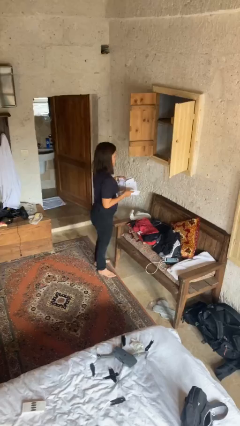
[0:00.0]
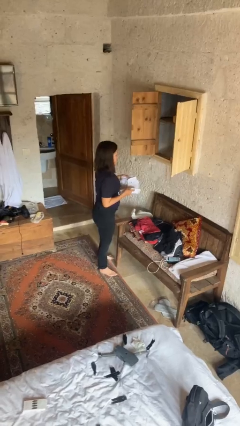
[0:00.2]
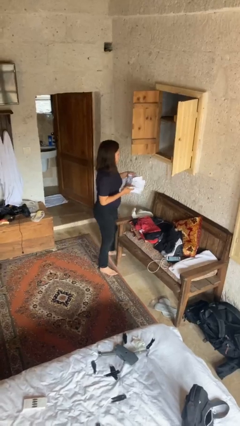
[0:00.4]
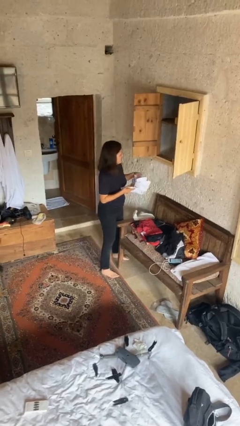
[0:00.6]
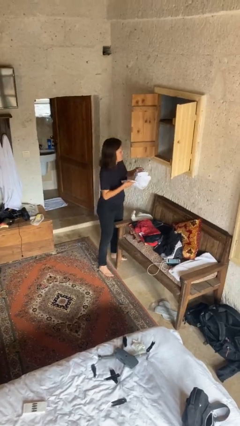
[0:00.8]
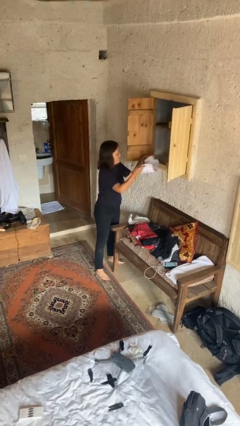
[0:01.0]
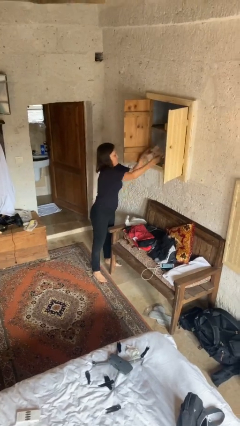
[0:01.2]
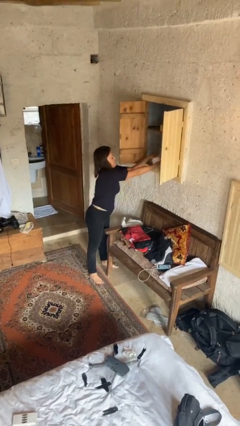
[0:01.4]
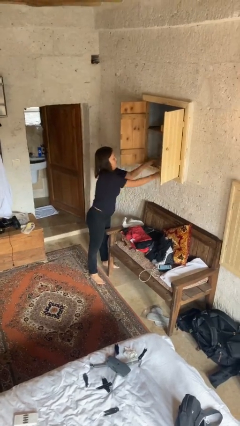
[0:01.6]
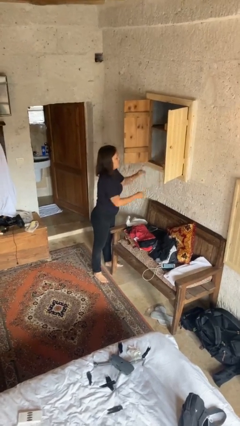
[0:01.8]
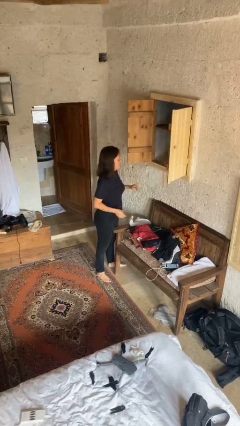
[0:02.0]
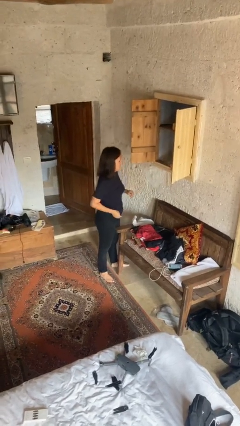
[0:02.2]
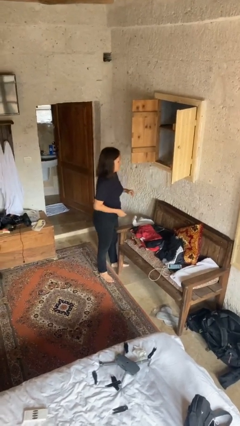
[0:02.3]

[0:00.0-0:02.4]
person puts clothes into dresser

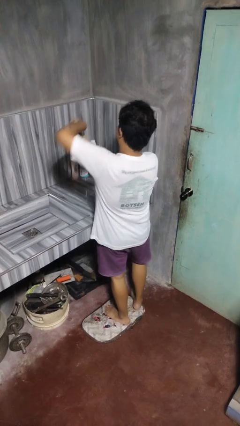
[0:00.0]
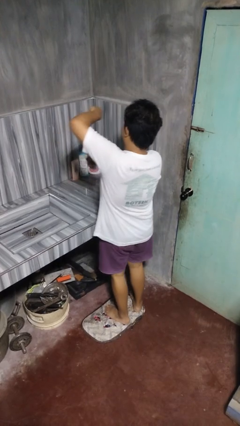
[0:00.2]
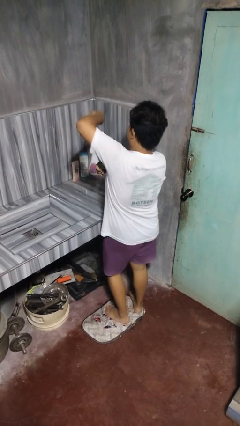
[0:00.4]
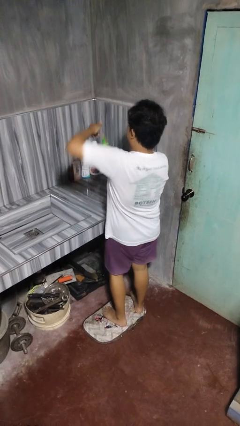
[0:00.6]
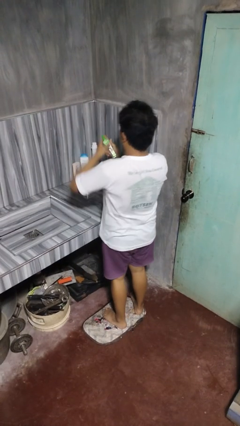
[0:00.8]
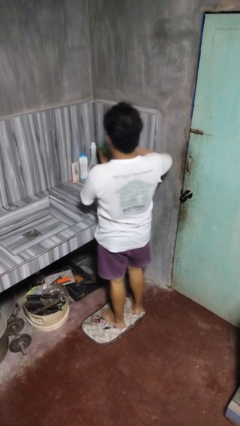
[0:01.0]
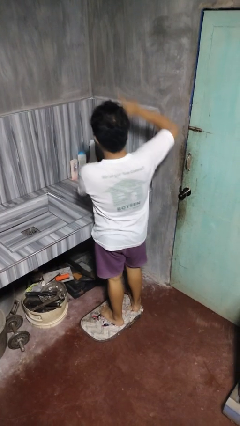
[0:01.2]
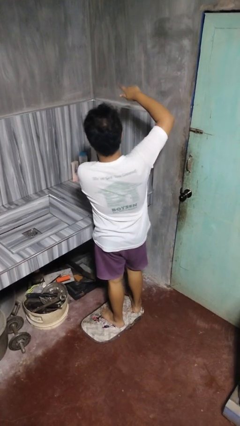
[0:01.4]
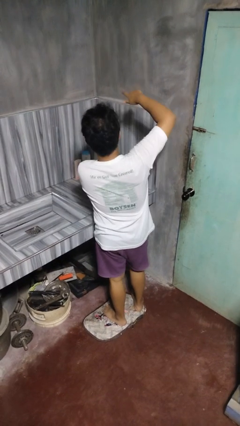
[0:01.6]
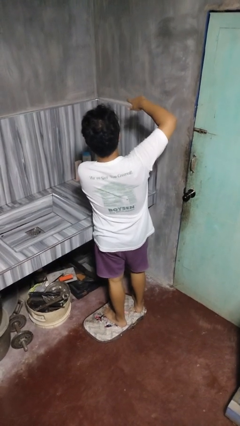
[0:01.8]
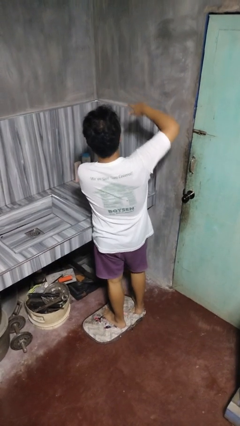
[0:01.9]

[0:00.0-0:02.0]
person applies deodorant

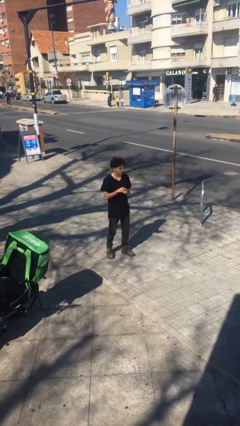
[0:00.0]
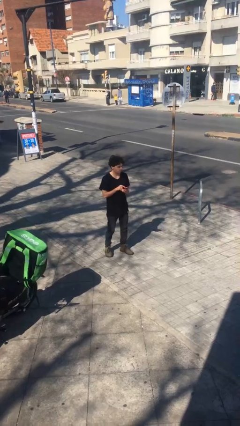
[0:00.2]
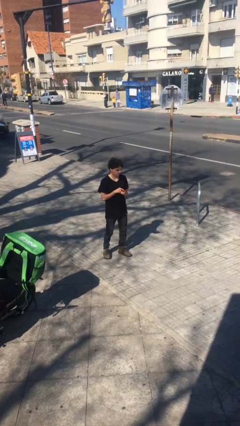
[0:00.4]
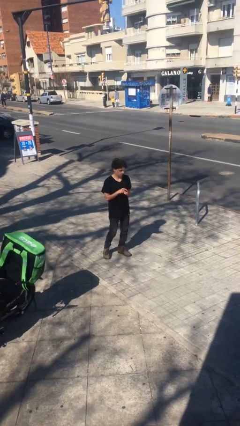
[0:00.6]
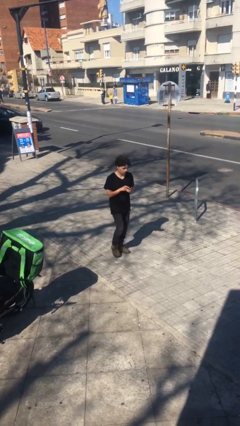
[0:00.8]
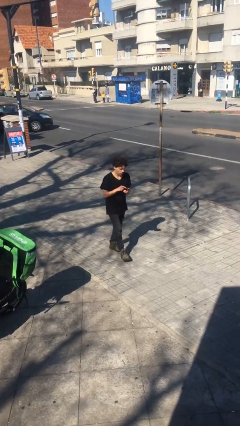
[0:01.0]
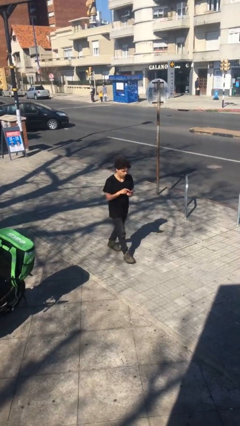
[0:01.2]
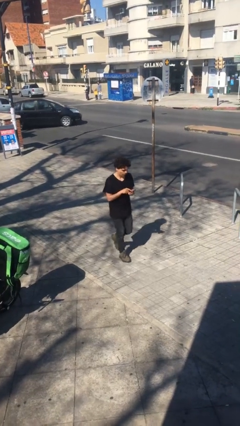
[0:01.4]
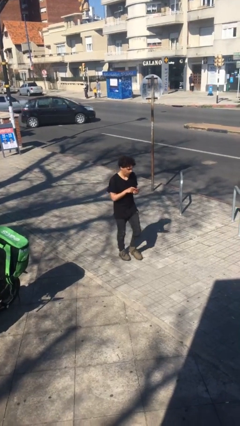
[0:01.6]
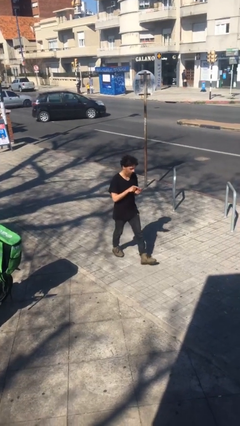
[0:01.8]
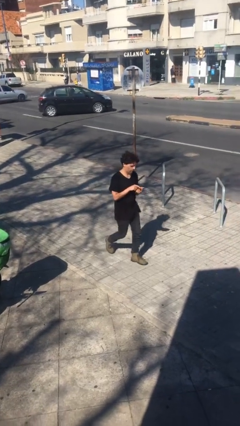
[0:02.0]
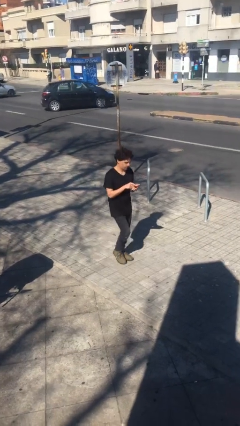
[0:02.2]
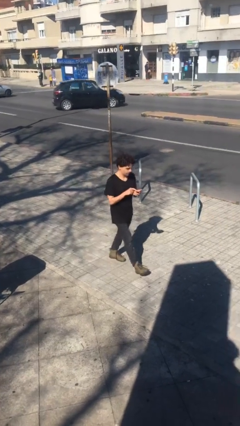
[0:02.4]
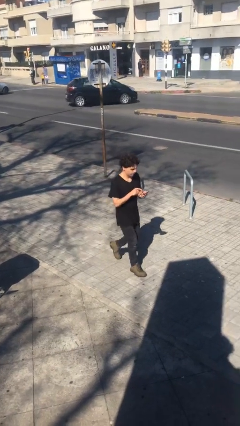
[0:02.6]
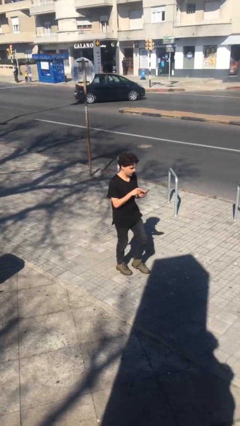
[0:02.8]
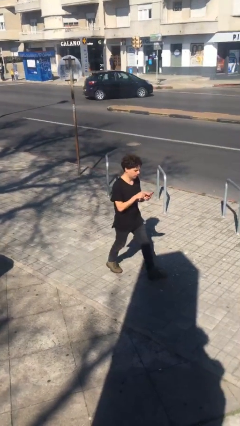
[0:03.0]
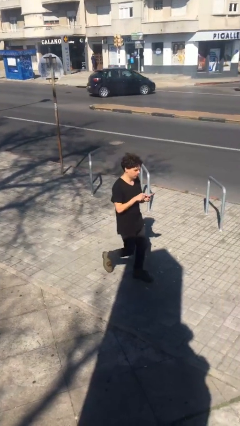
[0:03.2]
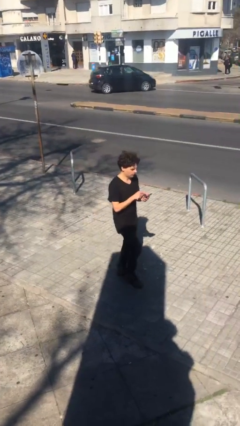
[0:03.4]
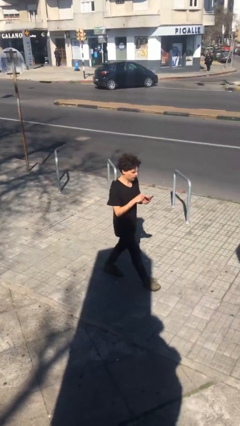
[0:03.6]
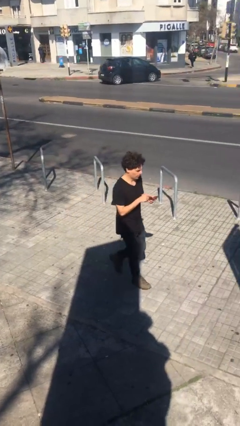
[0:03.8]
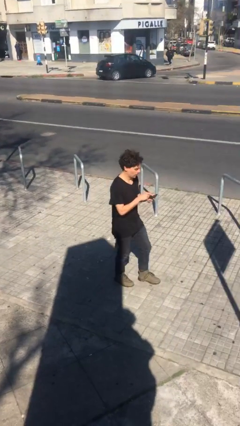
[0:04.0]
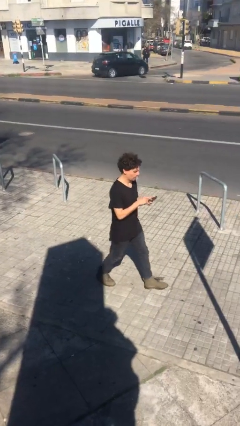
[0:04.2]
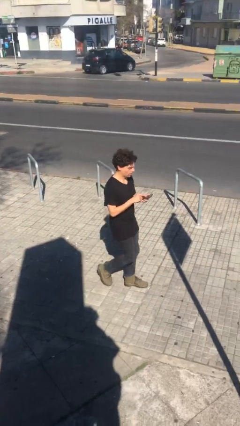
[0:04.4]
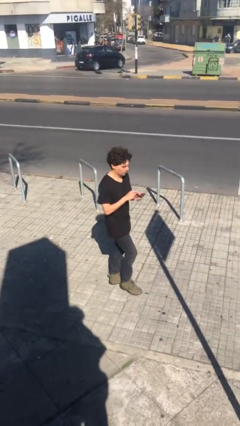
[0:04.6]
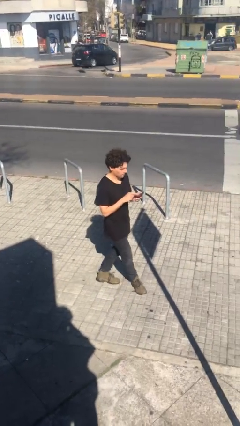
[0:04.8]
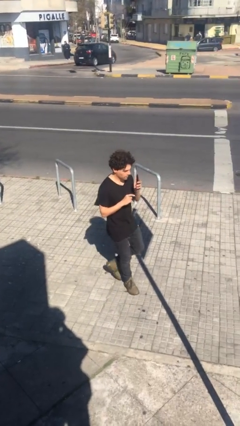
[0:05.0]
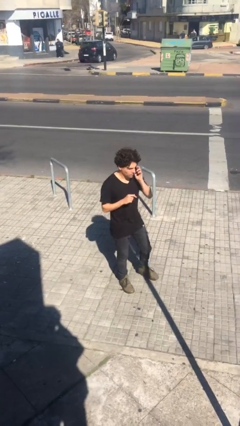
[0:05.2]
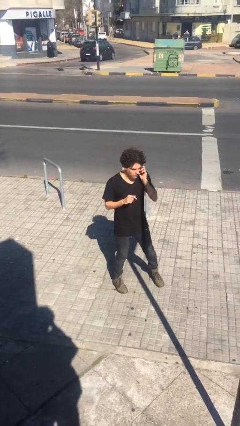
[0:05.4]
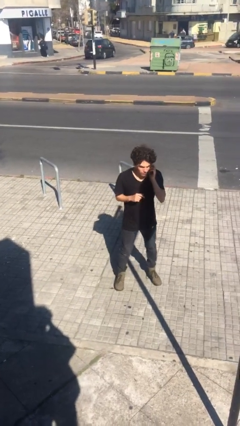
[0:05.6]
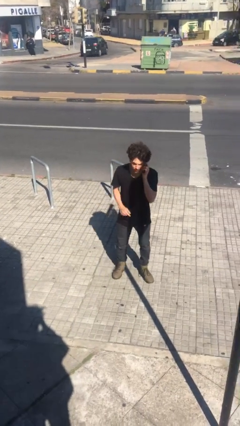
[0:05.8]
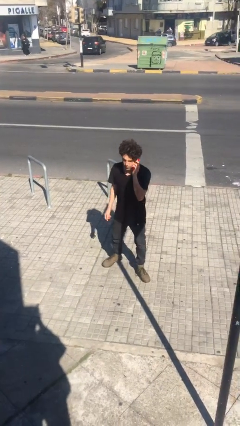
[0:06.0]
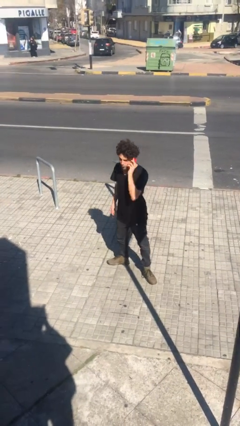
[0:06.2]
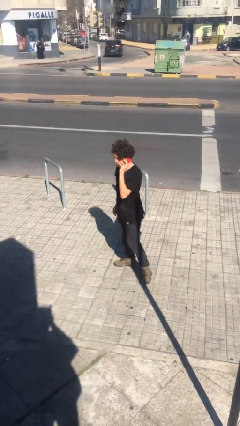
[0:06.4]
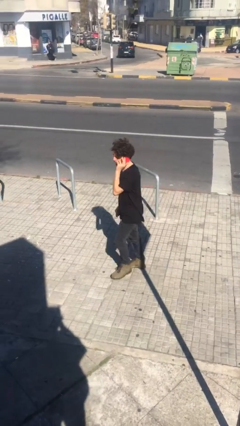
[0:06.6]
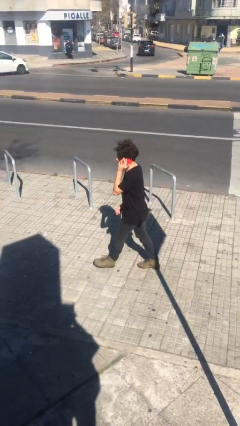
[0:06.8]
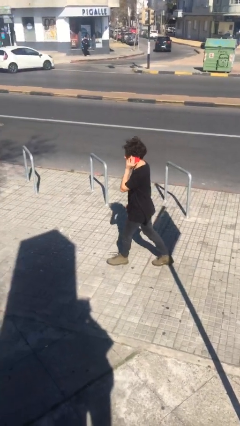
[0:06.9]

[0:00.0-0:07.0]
person texts on phone

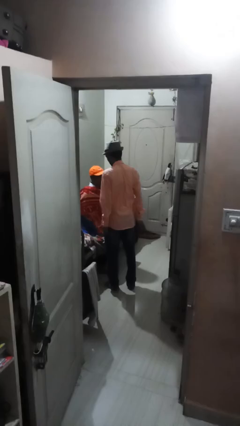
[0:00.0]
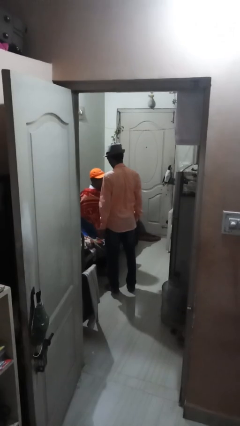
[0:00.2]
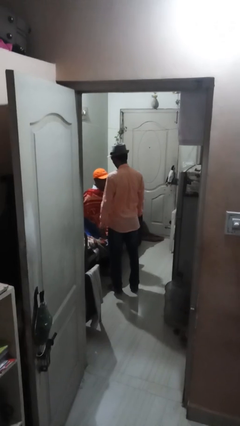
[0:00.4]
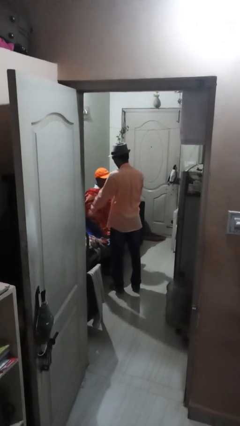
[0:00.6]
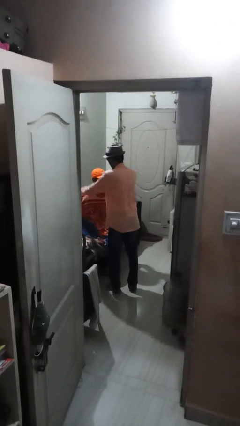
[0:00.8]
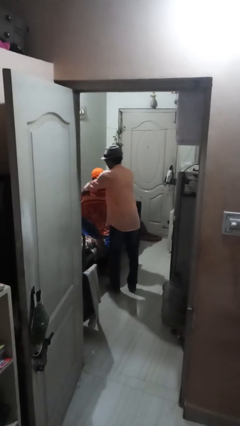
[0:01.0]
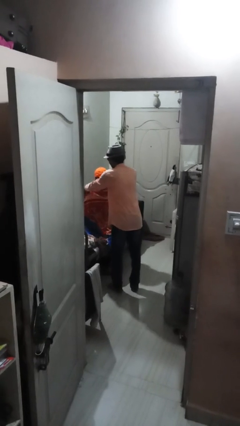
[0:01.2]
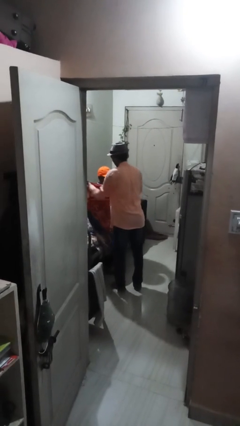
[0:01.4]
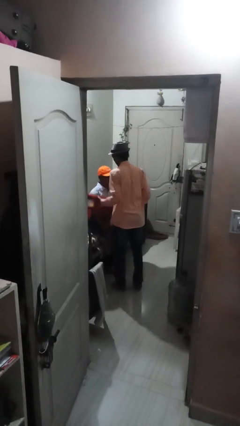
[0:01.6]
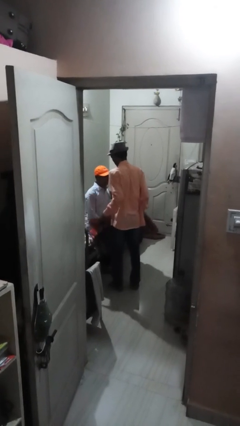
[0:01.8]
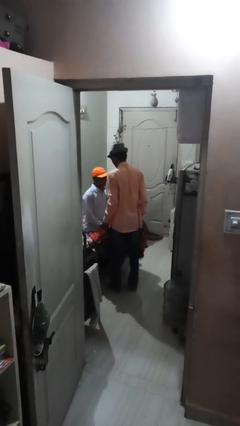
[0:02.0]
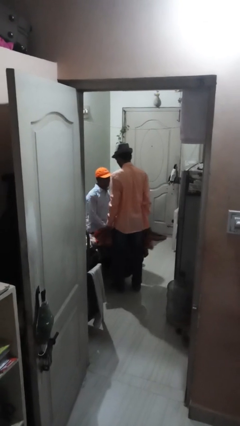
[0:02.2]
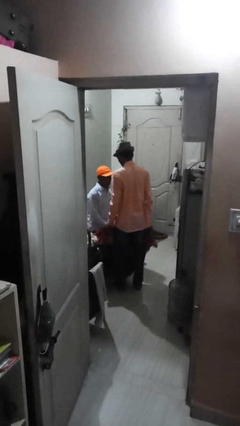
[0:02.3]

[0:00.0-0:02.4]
person covers friend with blanket

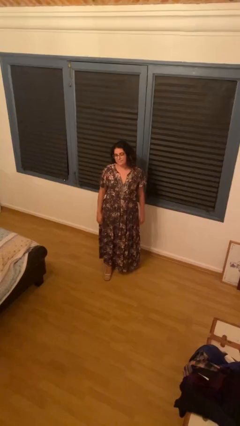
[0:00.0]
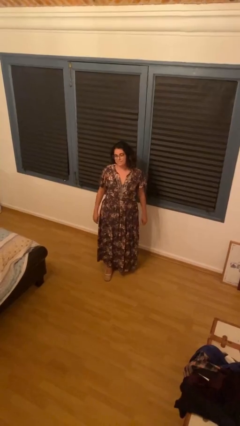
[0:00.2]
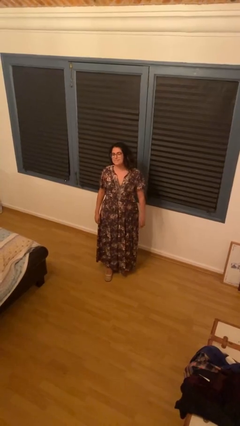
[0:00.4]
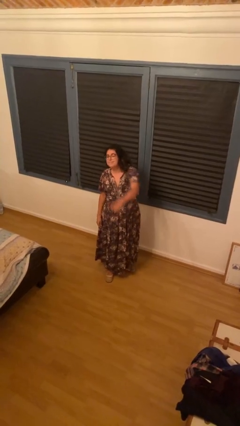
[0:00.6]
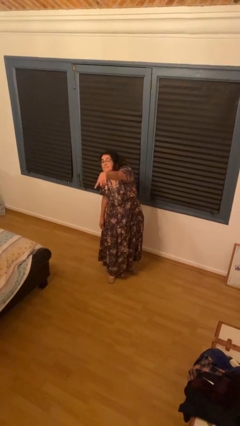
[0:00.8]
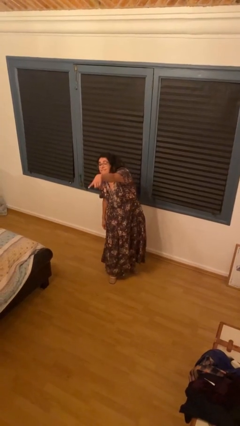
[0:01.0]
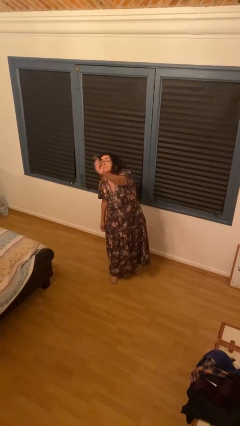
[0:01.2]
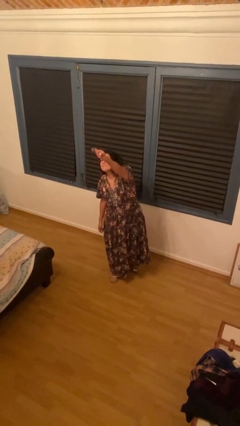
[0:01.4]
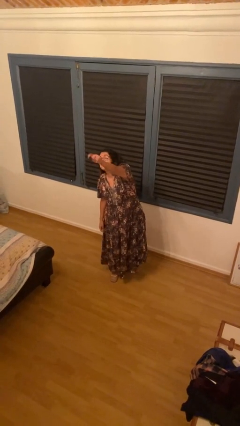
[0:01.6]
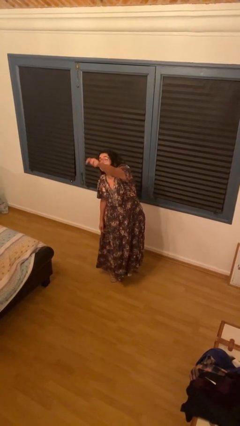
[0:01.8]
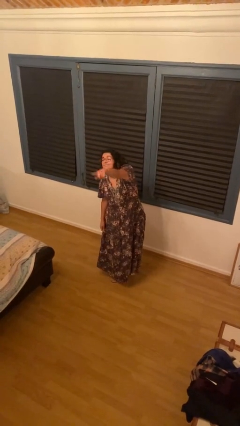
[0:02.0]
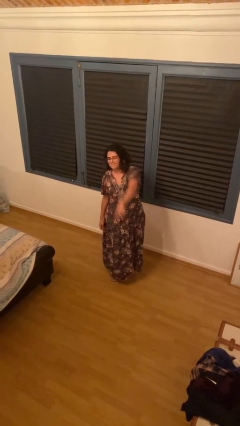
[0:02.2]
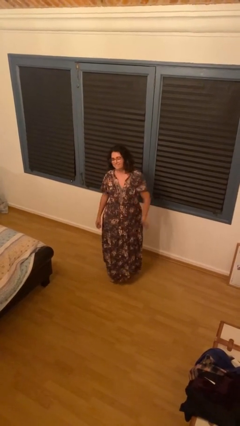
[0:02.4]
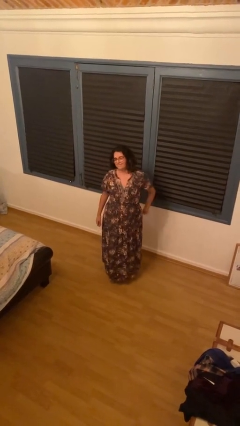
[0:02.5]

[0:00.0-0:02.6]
person points at person

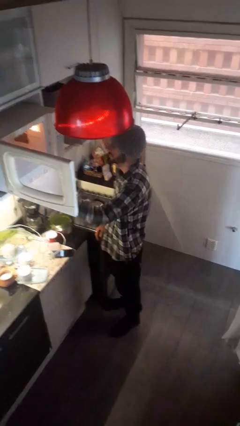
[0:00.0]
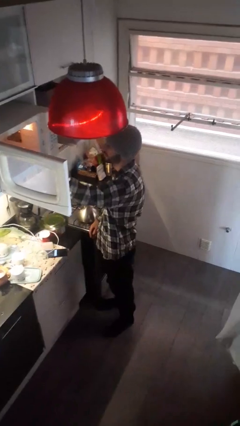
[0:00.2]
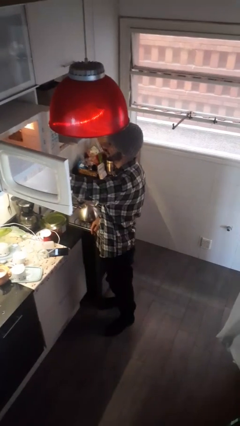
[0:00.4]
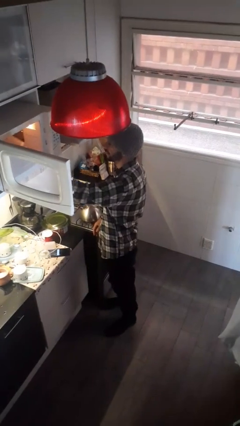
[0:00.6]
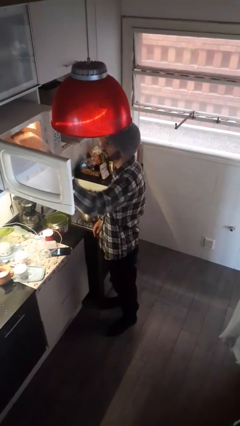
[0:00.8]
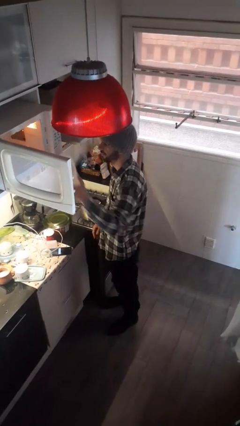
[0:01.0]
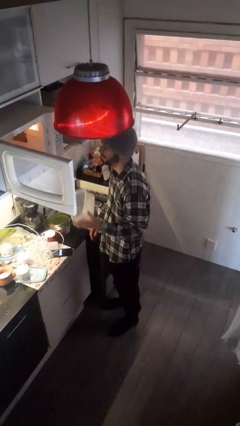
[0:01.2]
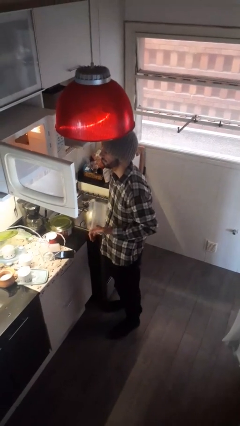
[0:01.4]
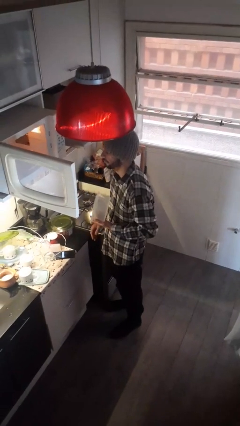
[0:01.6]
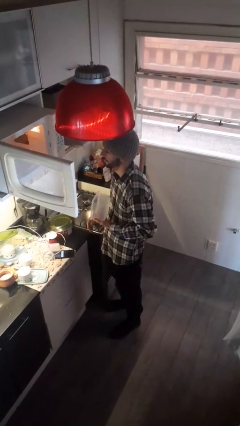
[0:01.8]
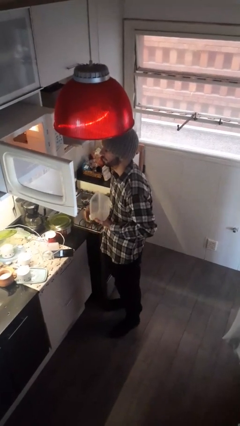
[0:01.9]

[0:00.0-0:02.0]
person takes object from microwave
